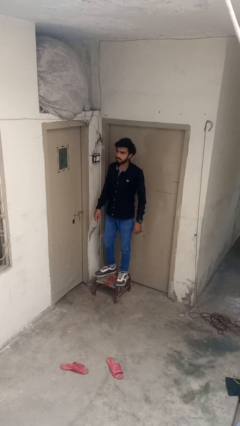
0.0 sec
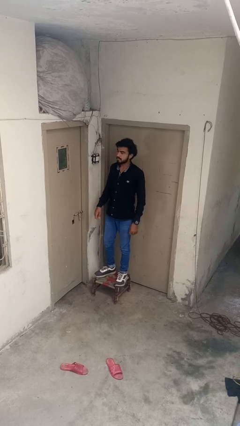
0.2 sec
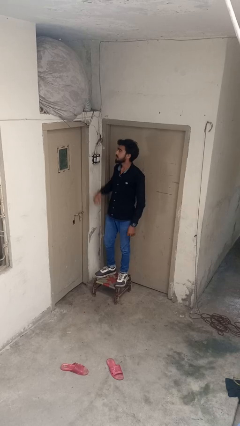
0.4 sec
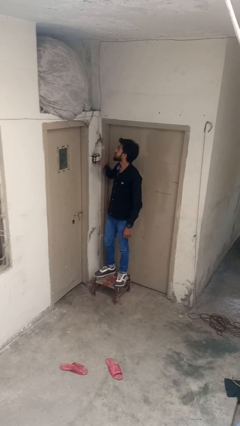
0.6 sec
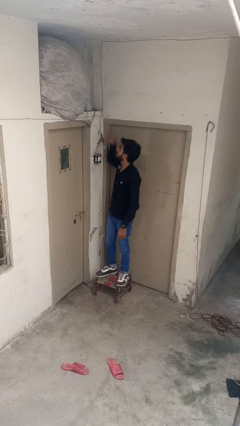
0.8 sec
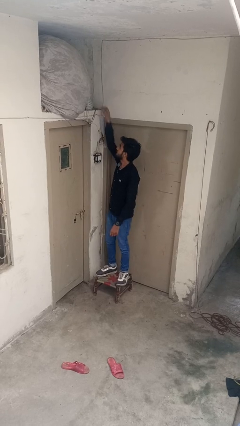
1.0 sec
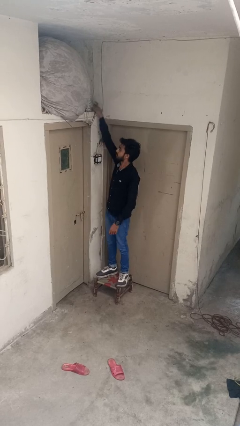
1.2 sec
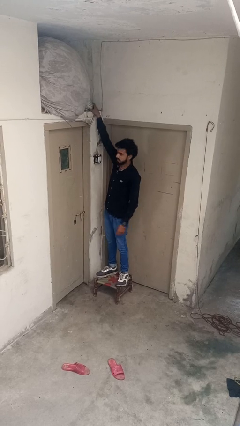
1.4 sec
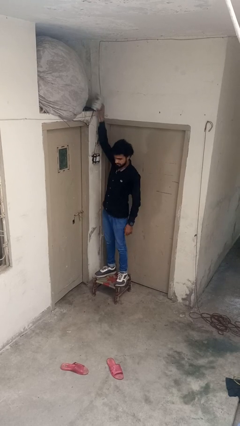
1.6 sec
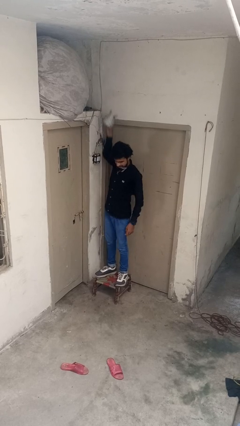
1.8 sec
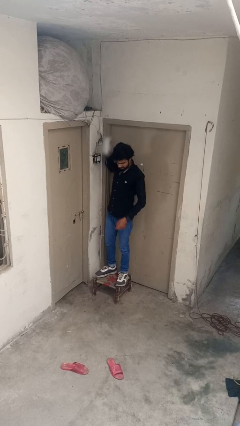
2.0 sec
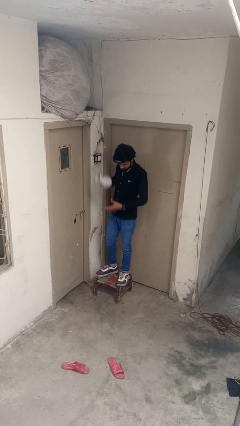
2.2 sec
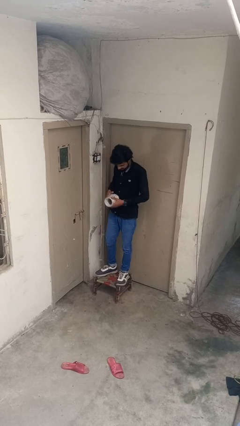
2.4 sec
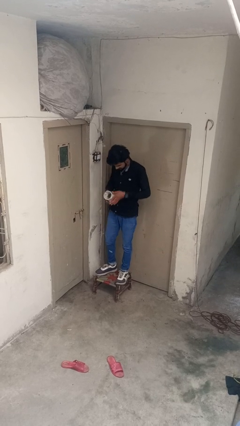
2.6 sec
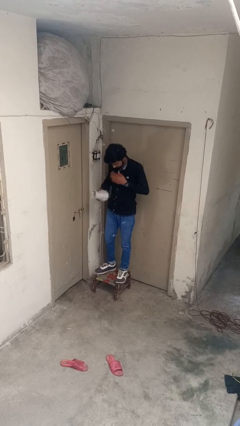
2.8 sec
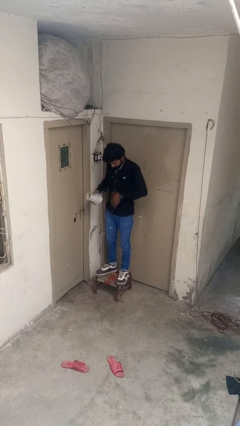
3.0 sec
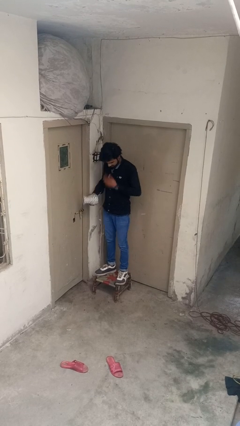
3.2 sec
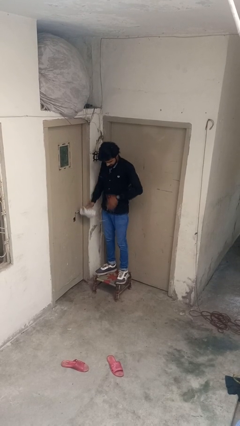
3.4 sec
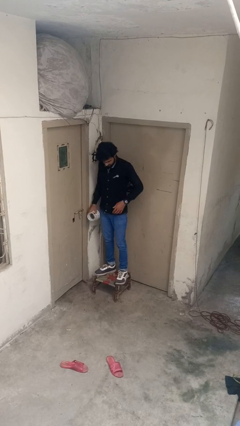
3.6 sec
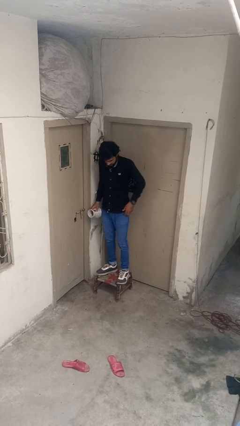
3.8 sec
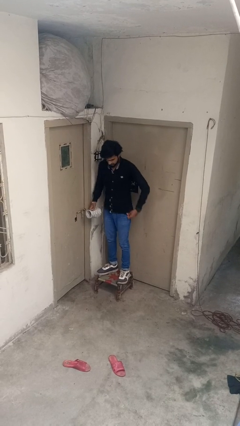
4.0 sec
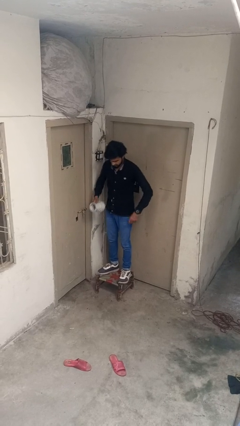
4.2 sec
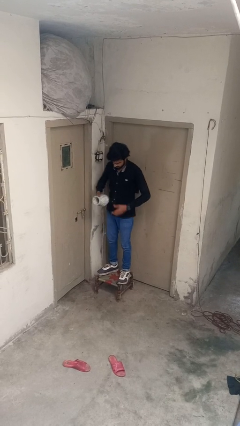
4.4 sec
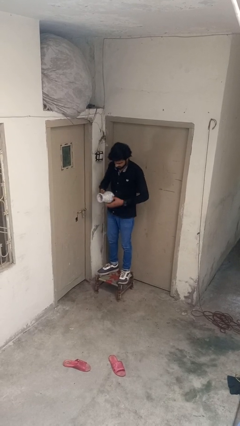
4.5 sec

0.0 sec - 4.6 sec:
person picks up object from shelf

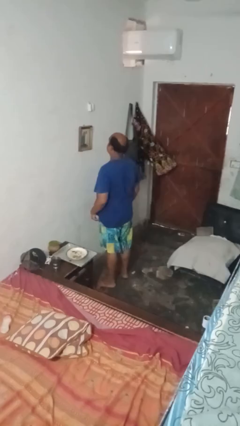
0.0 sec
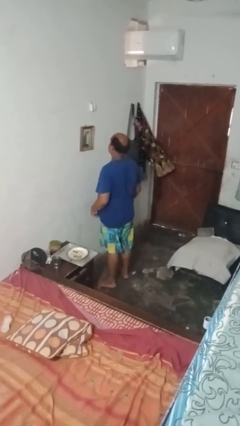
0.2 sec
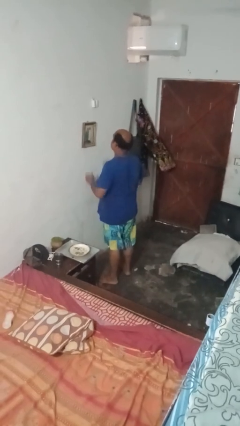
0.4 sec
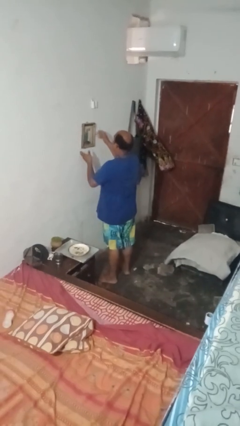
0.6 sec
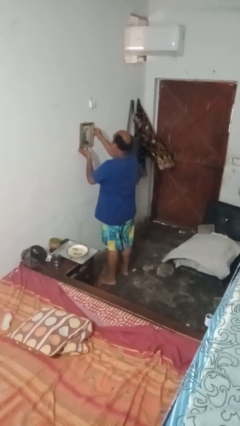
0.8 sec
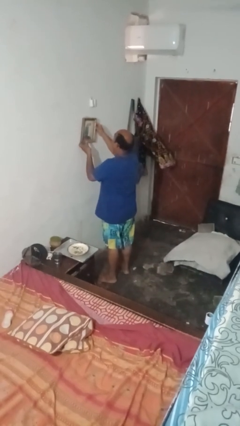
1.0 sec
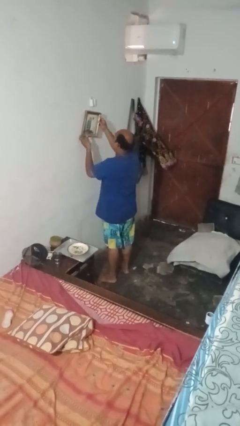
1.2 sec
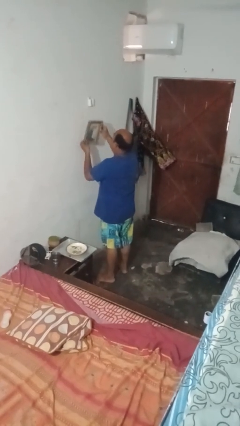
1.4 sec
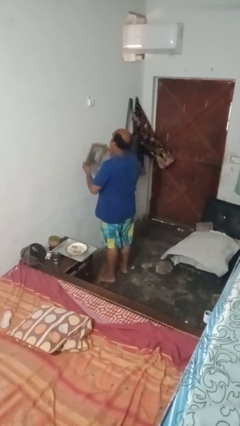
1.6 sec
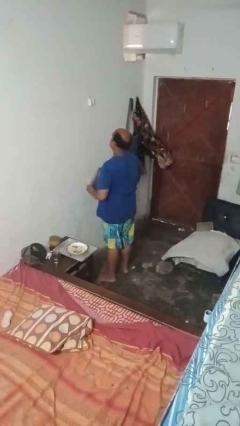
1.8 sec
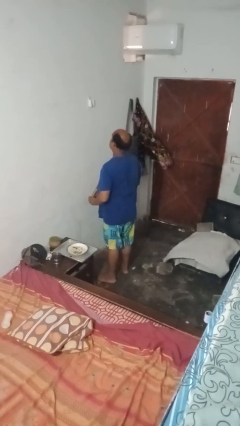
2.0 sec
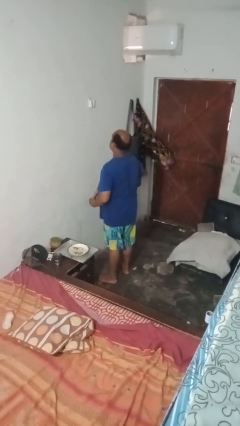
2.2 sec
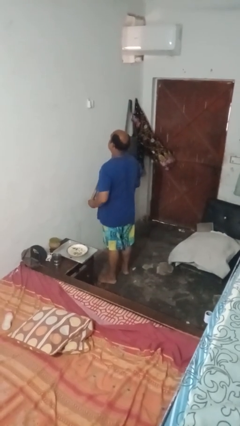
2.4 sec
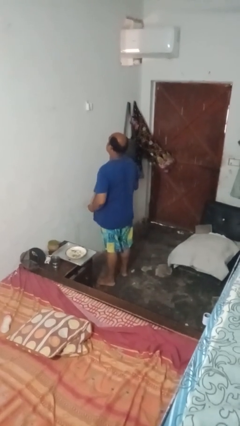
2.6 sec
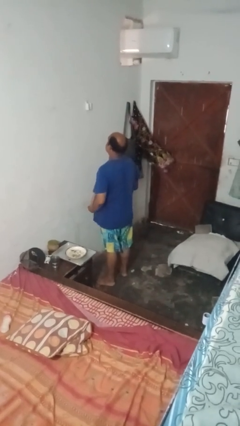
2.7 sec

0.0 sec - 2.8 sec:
person takes down picture frame

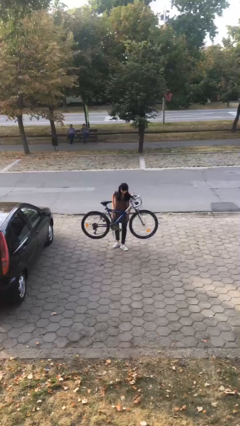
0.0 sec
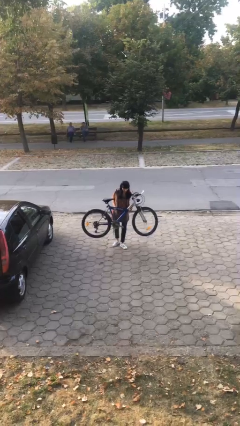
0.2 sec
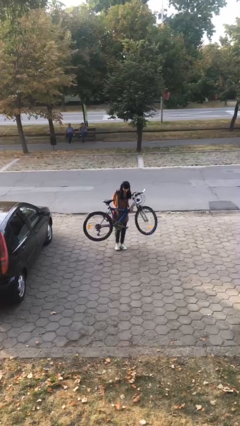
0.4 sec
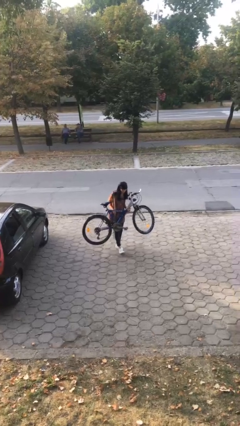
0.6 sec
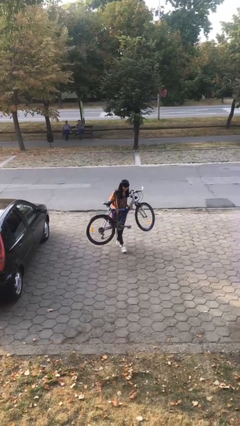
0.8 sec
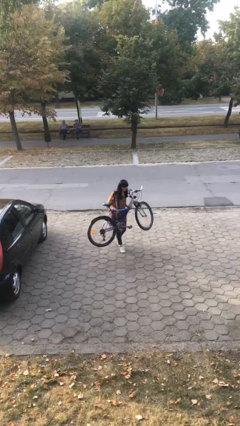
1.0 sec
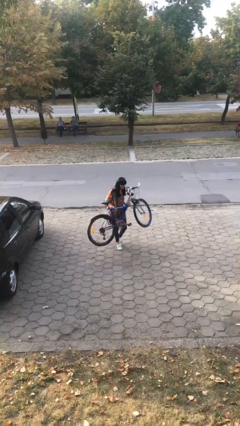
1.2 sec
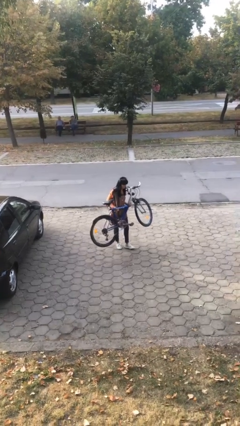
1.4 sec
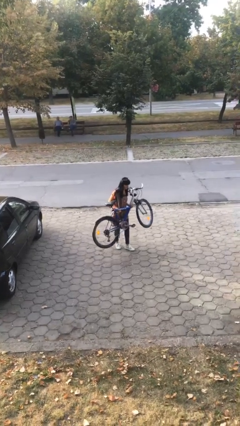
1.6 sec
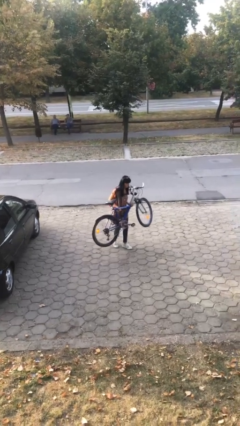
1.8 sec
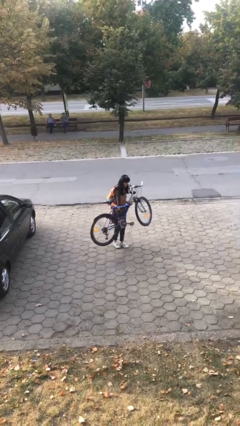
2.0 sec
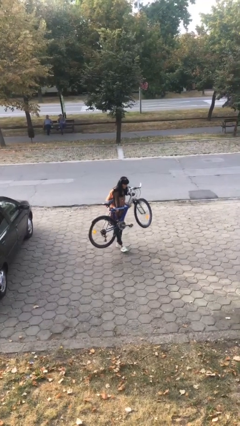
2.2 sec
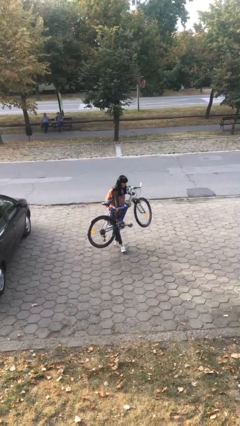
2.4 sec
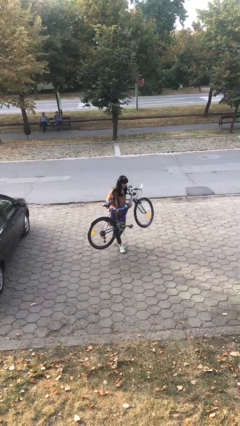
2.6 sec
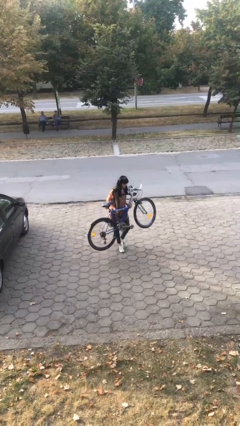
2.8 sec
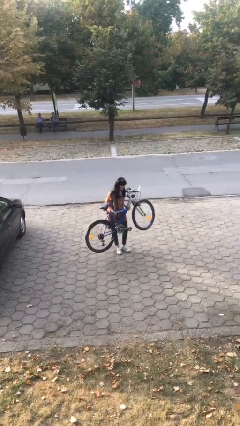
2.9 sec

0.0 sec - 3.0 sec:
person carries heavy object

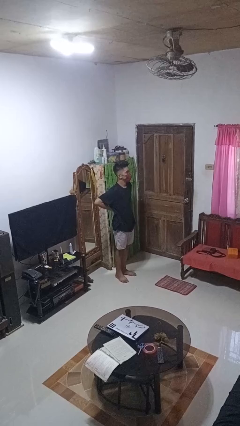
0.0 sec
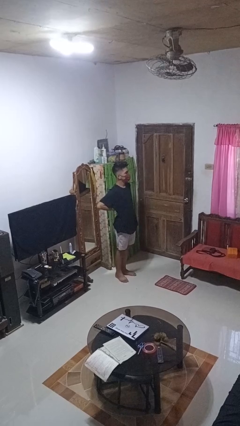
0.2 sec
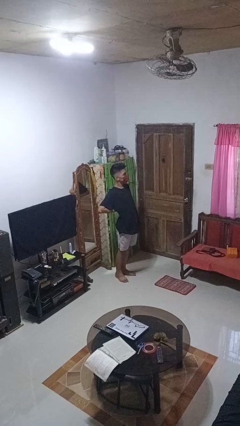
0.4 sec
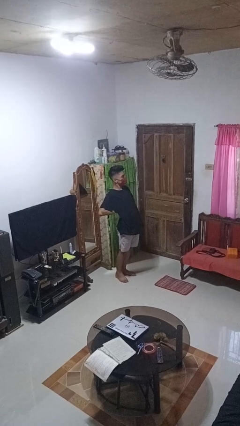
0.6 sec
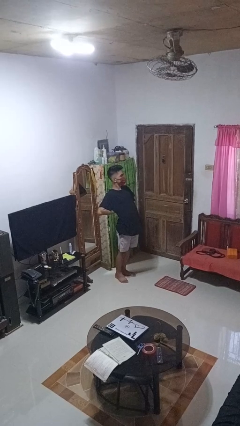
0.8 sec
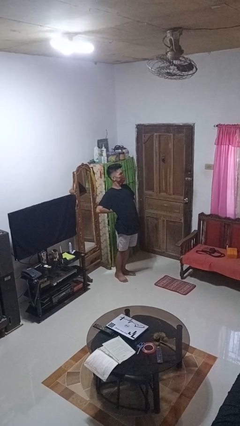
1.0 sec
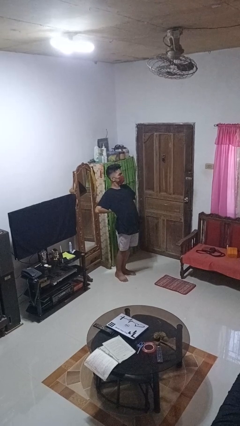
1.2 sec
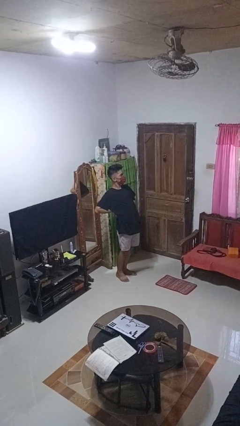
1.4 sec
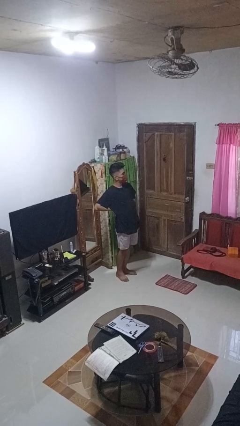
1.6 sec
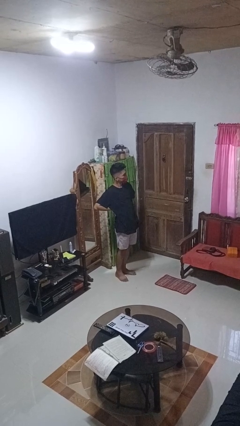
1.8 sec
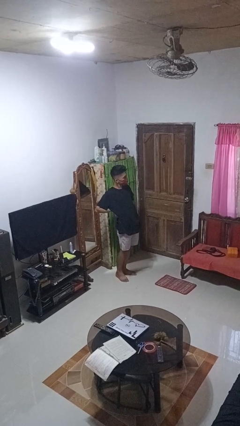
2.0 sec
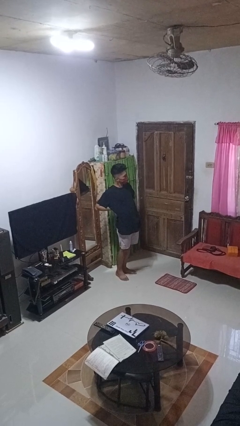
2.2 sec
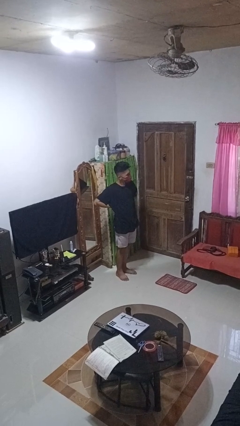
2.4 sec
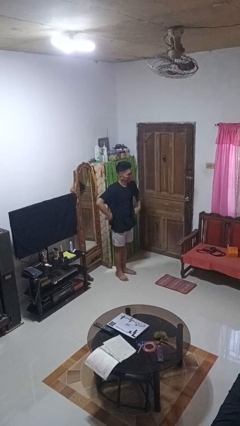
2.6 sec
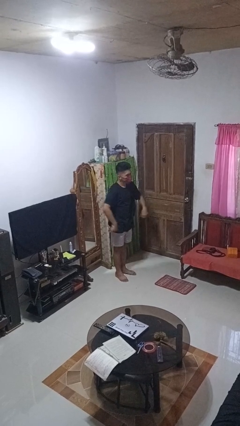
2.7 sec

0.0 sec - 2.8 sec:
person stretches back

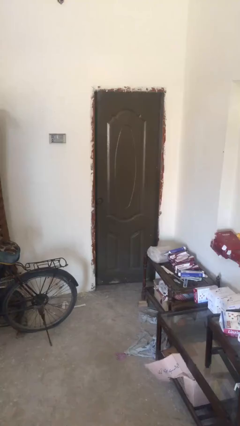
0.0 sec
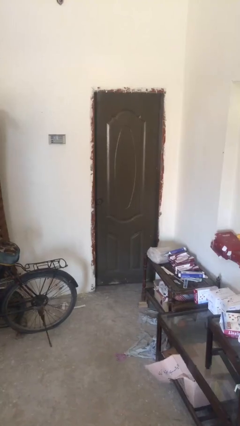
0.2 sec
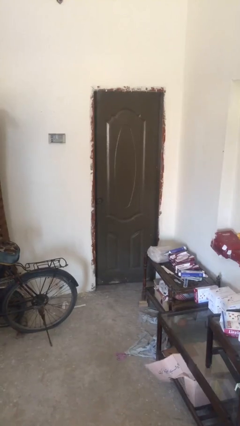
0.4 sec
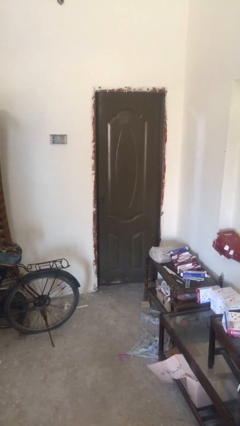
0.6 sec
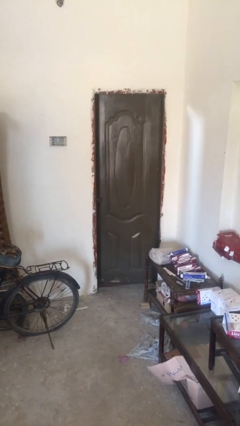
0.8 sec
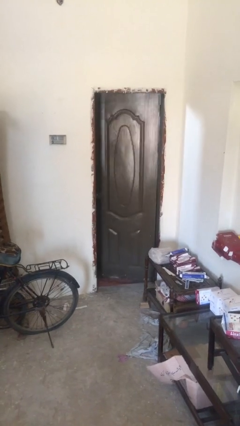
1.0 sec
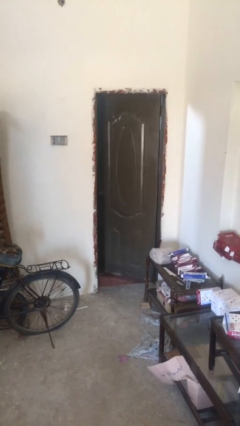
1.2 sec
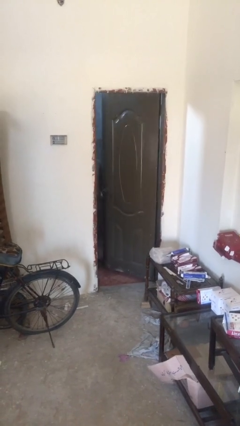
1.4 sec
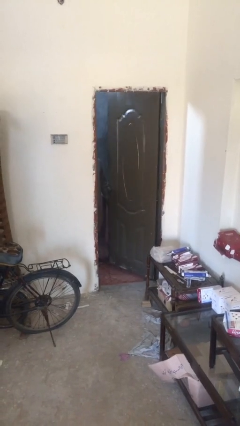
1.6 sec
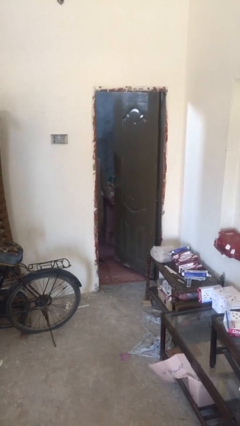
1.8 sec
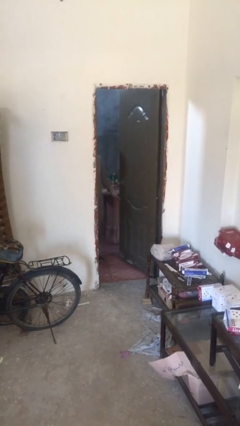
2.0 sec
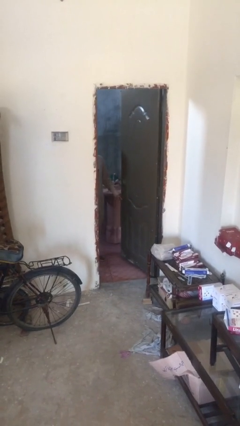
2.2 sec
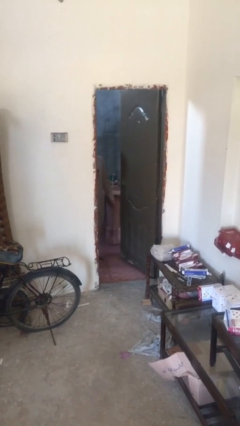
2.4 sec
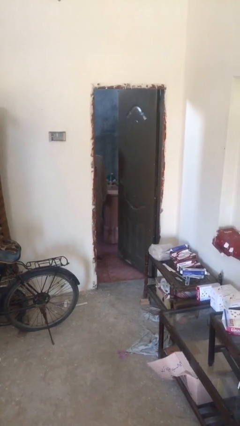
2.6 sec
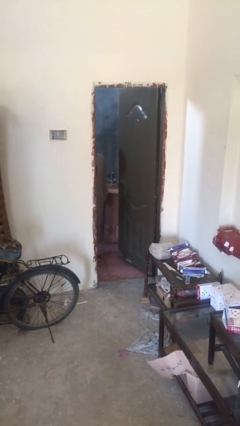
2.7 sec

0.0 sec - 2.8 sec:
person opens facility door

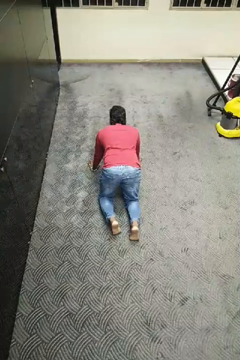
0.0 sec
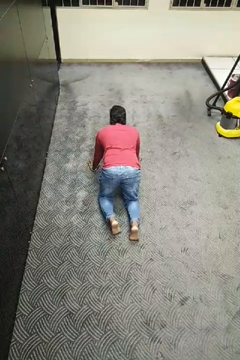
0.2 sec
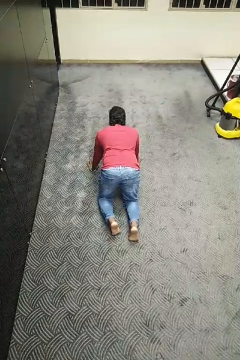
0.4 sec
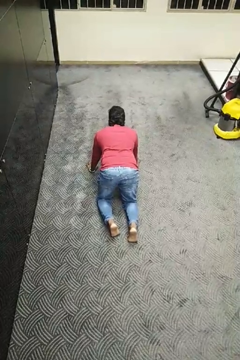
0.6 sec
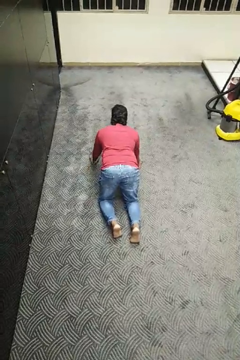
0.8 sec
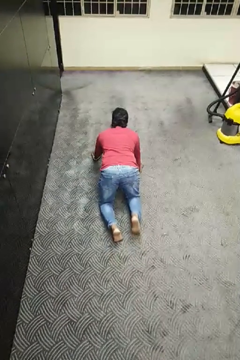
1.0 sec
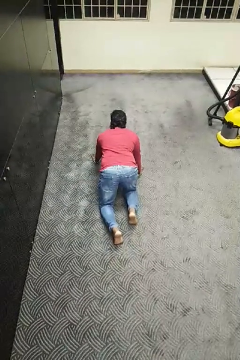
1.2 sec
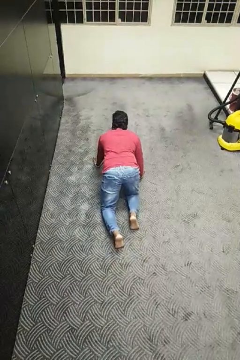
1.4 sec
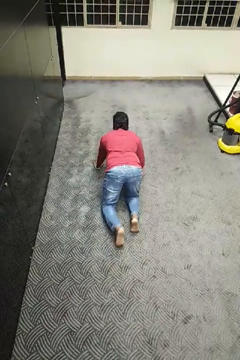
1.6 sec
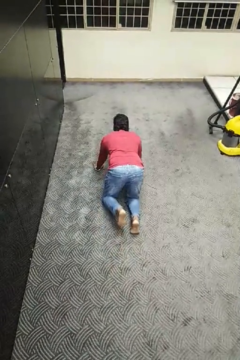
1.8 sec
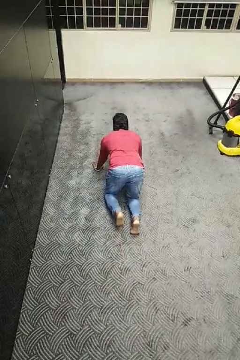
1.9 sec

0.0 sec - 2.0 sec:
person crawls

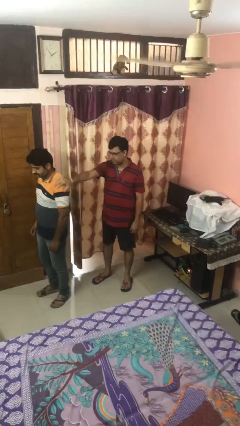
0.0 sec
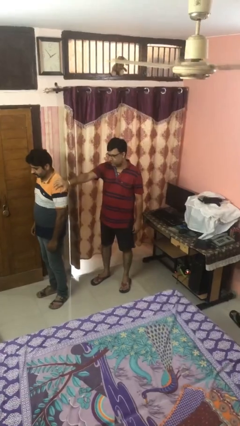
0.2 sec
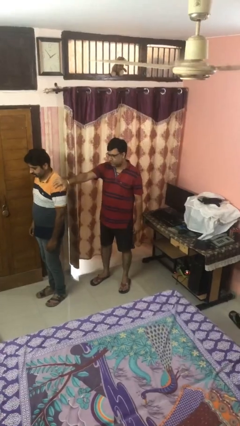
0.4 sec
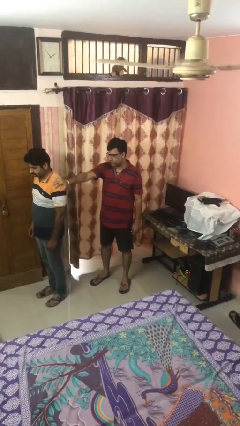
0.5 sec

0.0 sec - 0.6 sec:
person grabs person by shoulder
